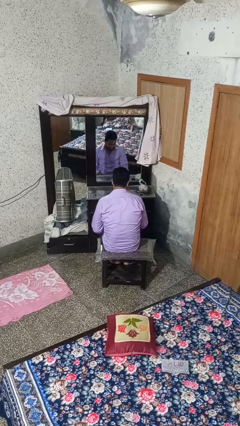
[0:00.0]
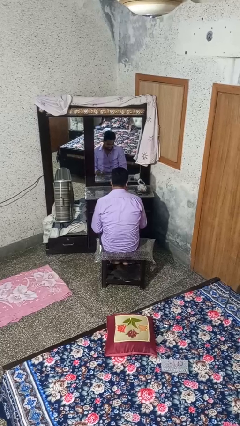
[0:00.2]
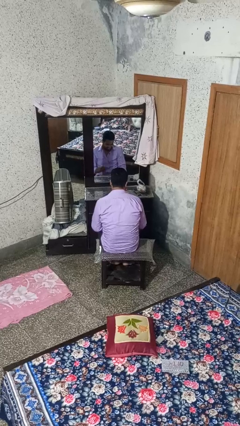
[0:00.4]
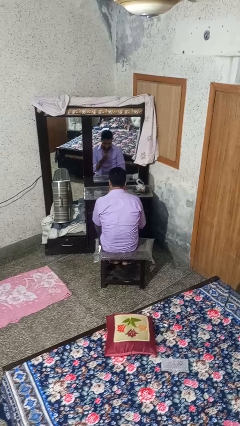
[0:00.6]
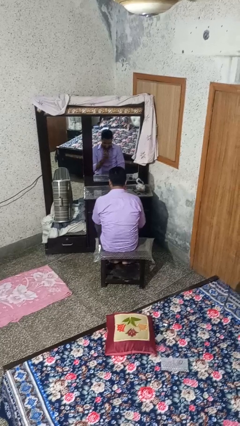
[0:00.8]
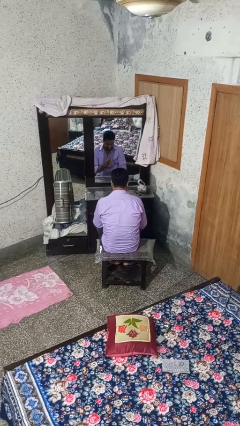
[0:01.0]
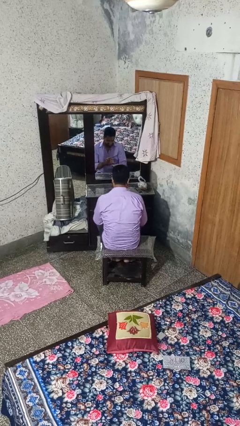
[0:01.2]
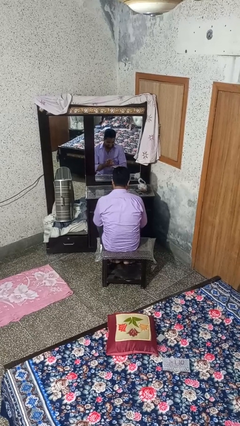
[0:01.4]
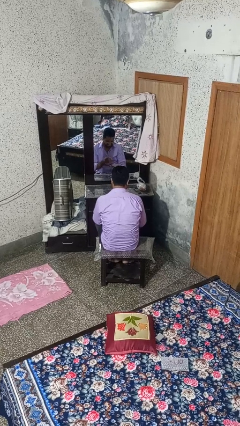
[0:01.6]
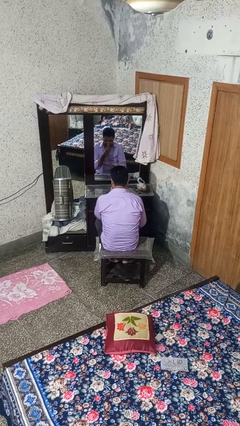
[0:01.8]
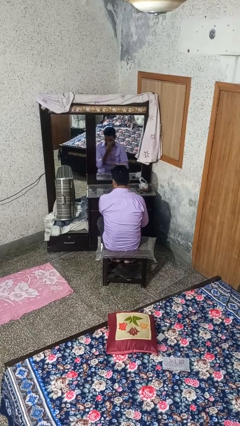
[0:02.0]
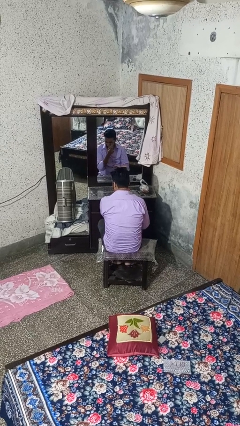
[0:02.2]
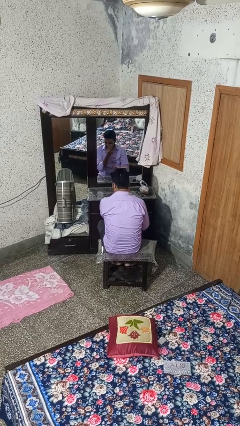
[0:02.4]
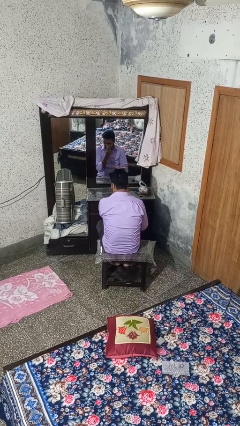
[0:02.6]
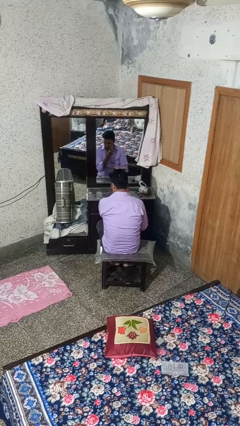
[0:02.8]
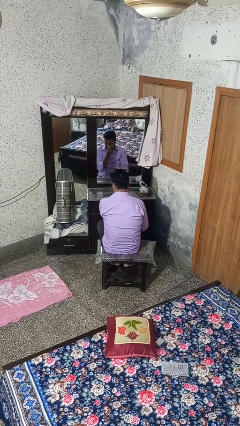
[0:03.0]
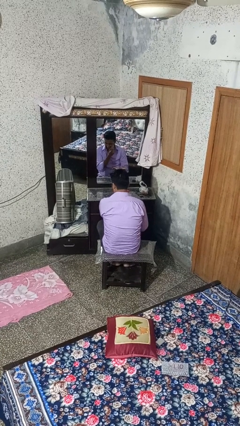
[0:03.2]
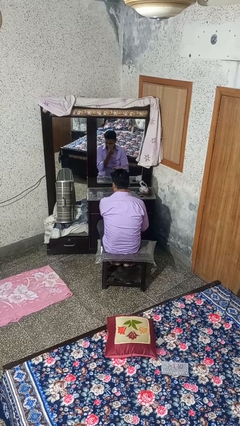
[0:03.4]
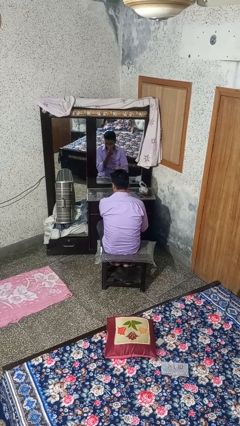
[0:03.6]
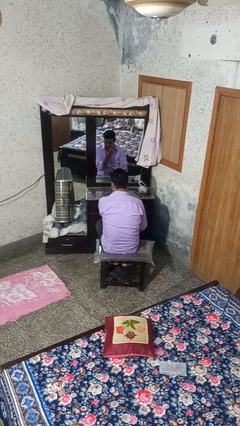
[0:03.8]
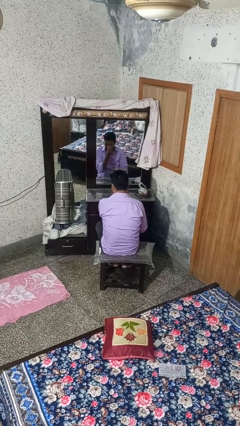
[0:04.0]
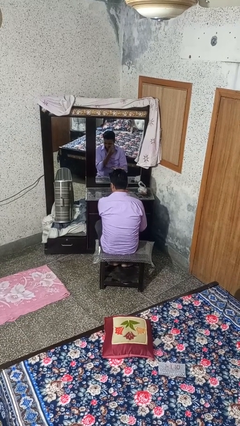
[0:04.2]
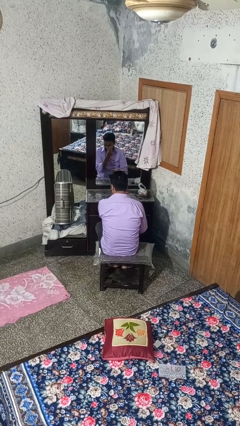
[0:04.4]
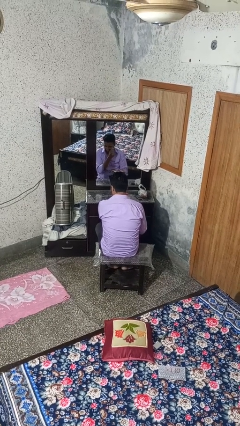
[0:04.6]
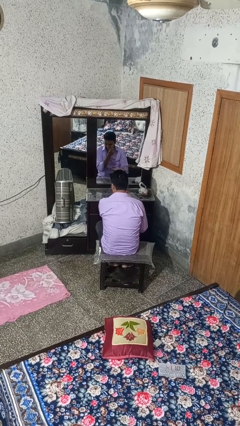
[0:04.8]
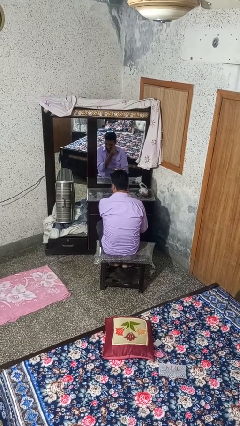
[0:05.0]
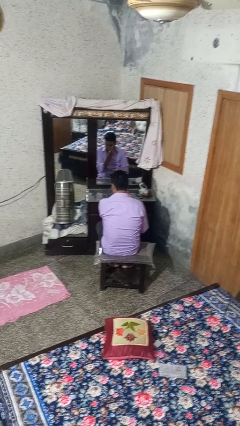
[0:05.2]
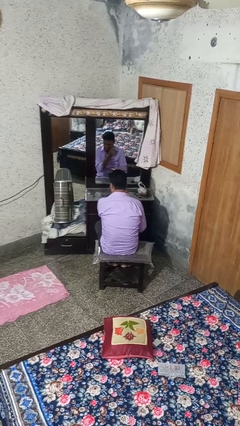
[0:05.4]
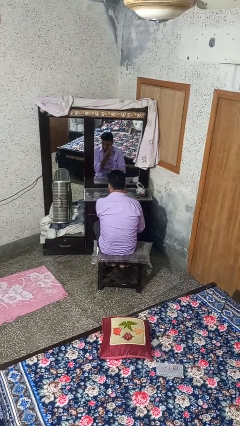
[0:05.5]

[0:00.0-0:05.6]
person applies eye makeup

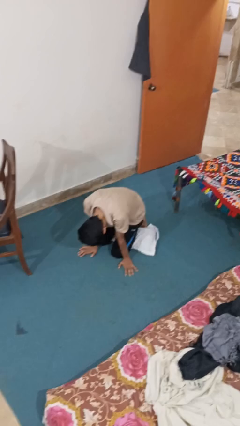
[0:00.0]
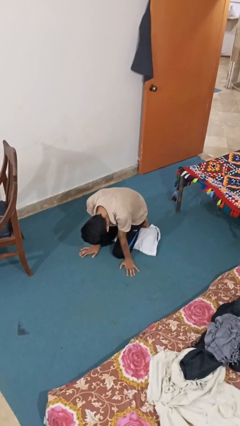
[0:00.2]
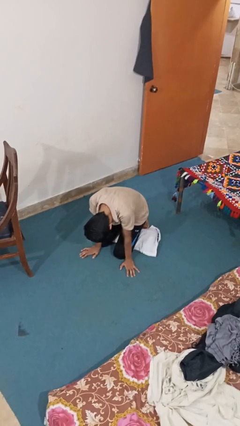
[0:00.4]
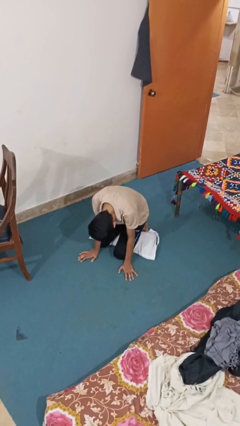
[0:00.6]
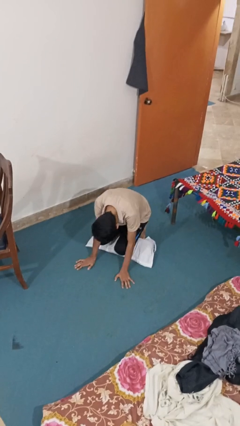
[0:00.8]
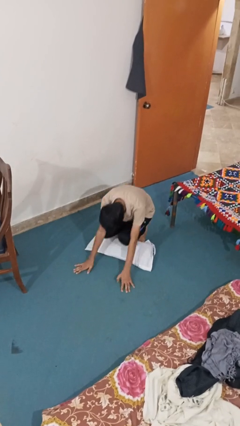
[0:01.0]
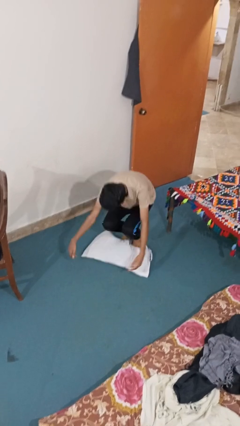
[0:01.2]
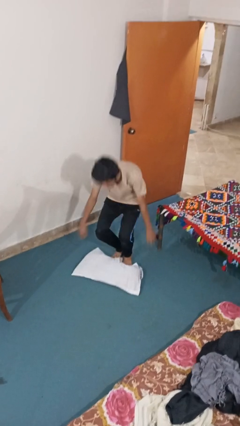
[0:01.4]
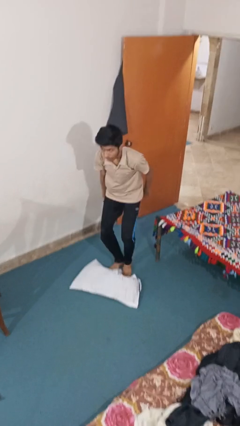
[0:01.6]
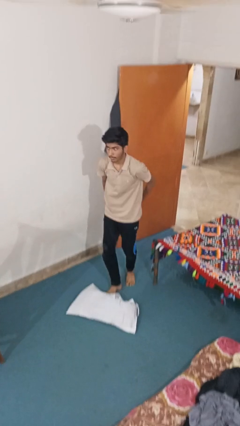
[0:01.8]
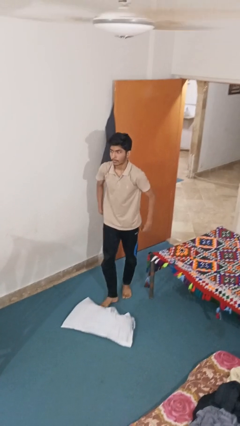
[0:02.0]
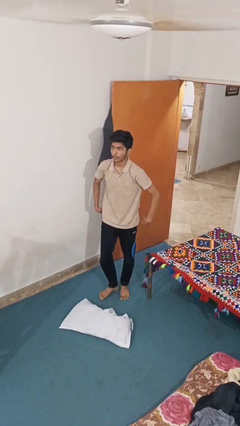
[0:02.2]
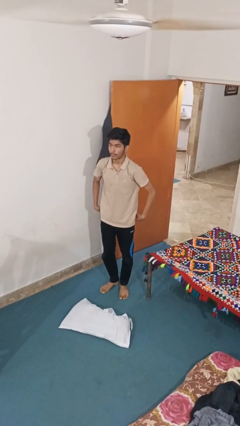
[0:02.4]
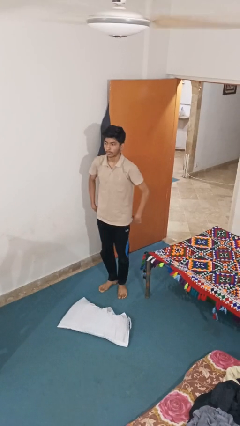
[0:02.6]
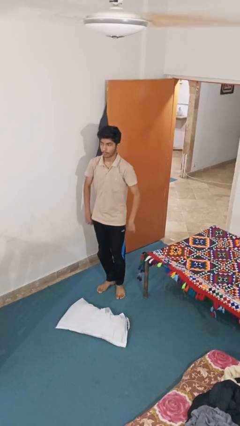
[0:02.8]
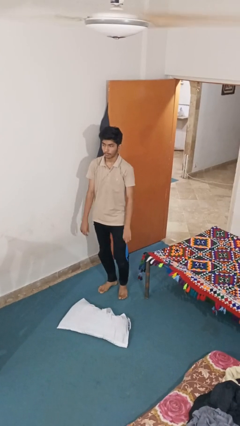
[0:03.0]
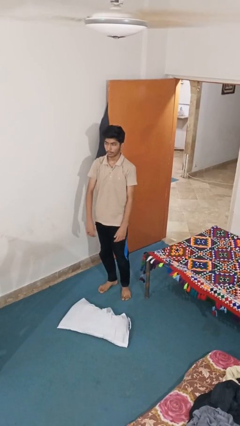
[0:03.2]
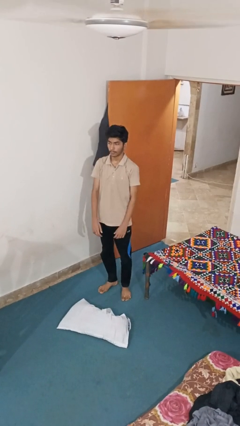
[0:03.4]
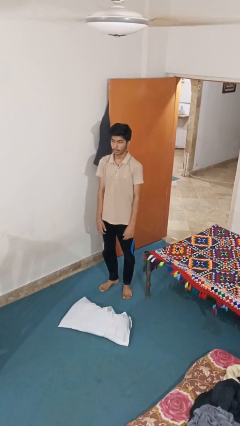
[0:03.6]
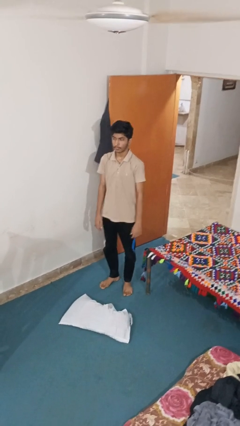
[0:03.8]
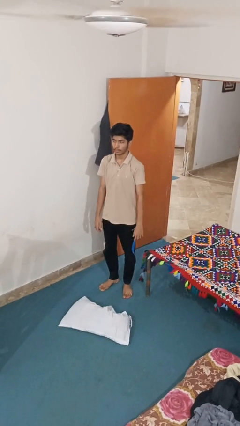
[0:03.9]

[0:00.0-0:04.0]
person stands up from floor

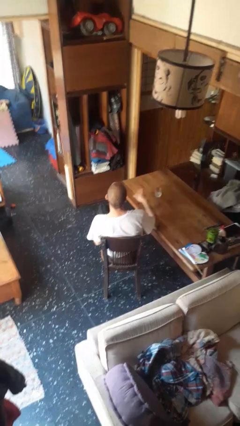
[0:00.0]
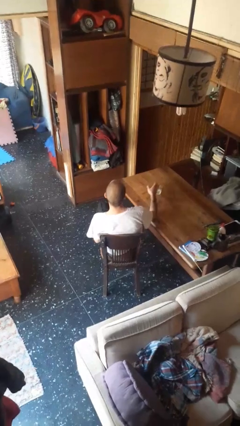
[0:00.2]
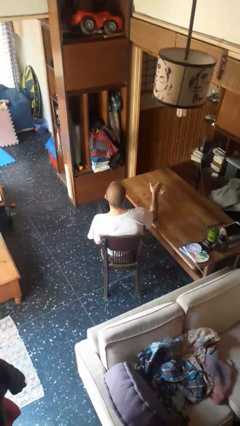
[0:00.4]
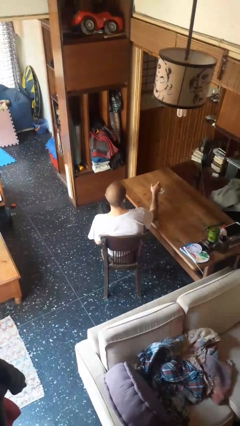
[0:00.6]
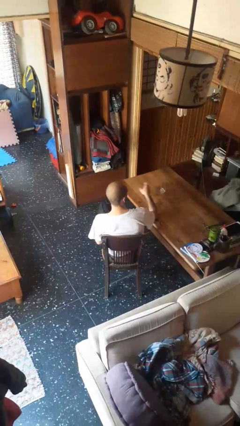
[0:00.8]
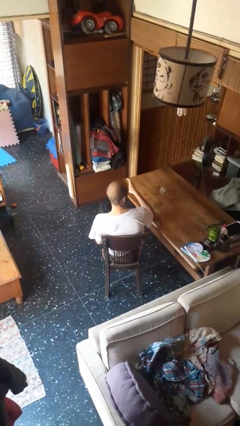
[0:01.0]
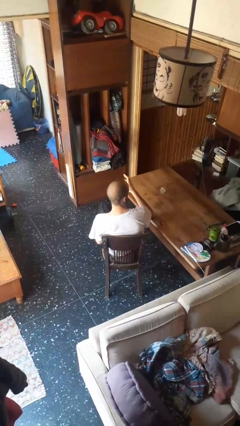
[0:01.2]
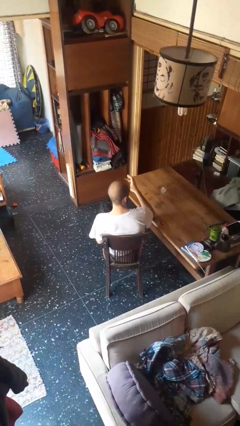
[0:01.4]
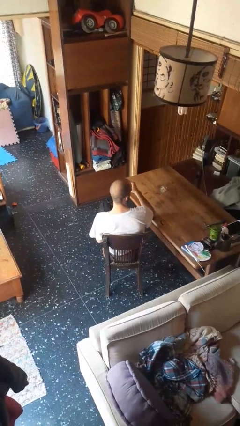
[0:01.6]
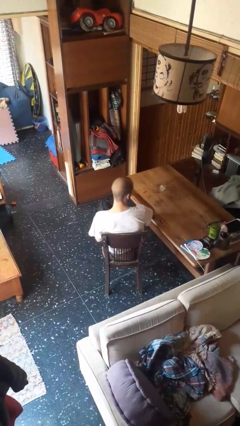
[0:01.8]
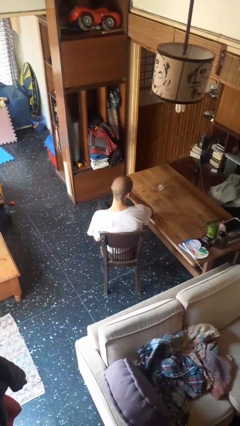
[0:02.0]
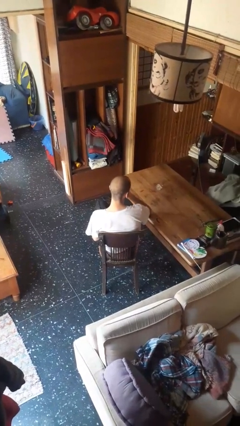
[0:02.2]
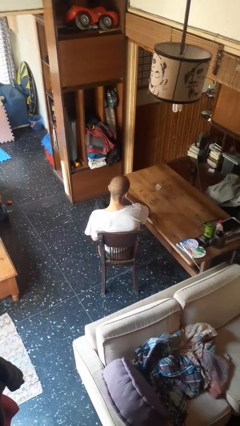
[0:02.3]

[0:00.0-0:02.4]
person knocks over glass

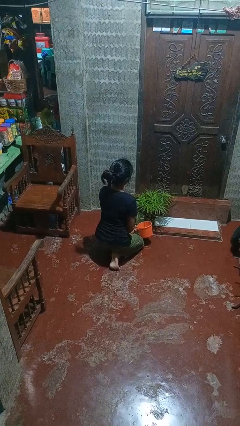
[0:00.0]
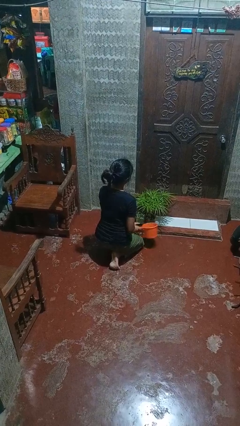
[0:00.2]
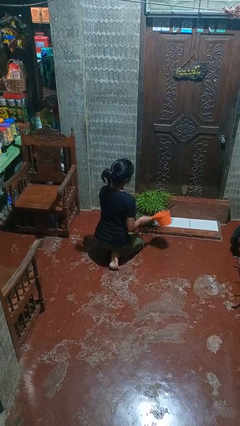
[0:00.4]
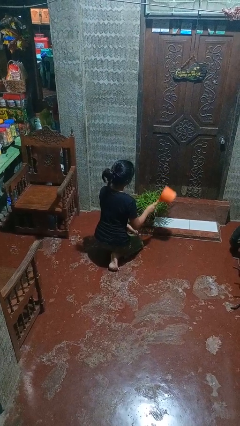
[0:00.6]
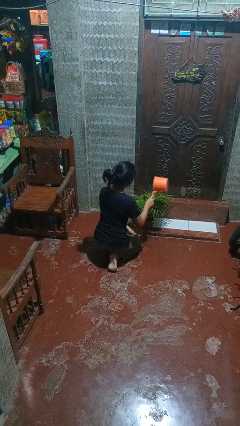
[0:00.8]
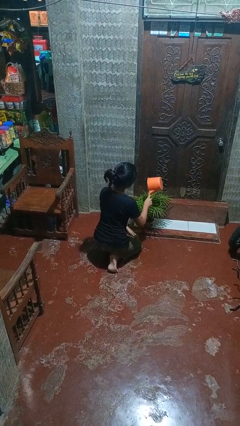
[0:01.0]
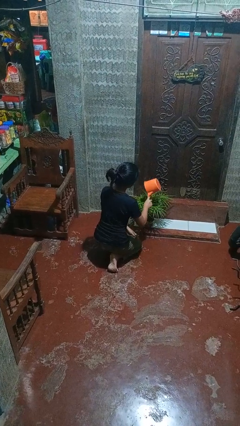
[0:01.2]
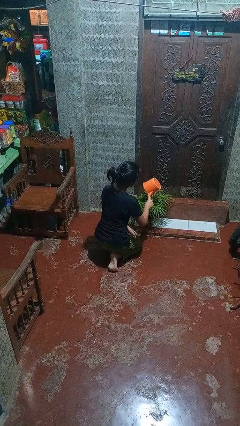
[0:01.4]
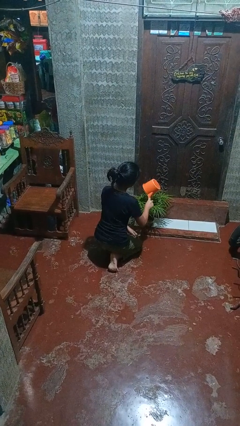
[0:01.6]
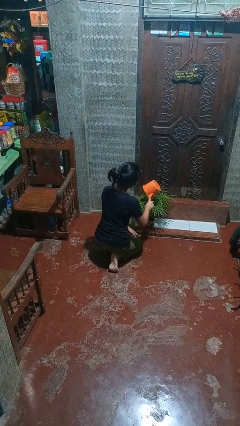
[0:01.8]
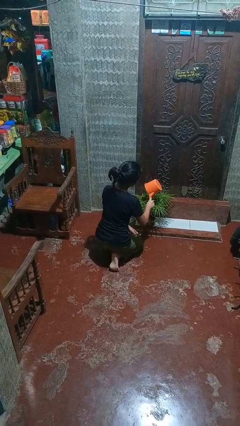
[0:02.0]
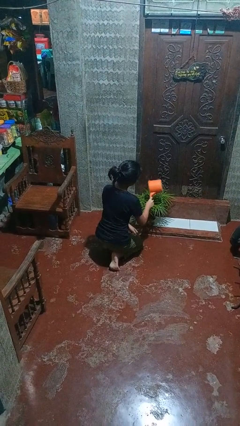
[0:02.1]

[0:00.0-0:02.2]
person waters houseplant

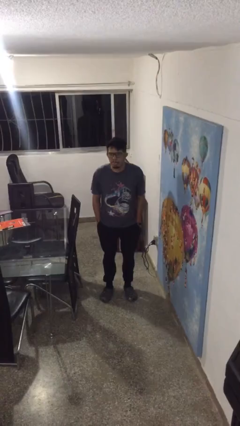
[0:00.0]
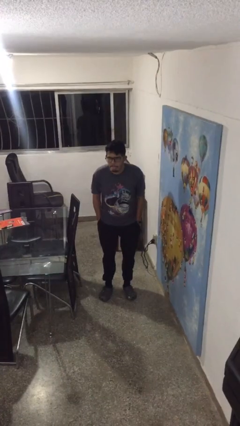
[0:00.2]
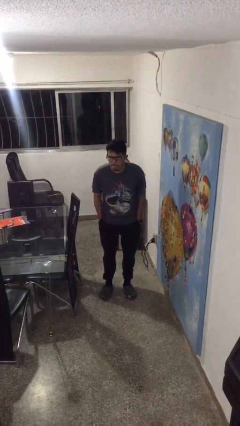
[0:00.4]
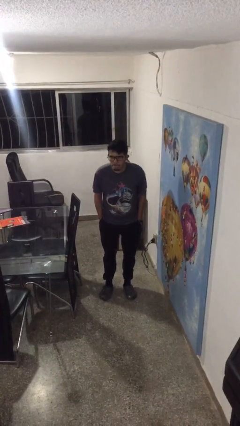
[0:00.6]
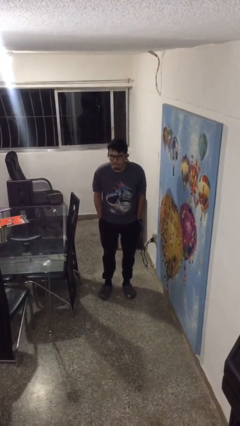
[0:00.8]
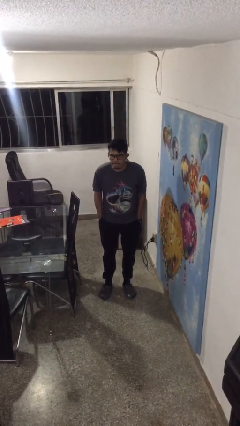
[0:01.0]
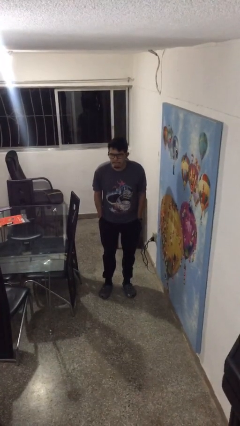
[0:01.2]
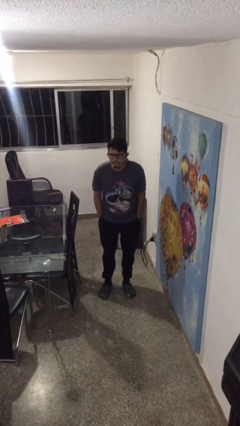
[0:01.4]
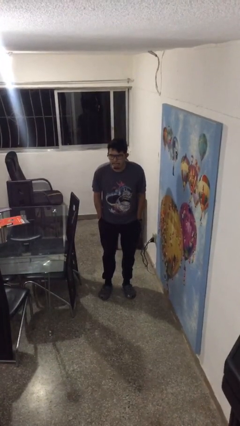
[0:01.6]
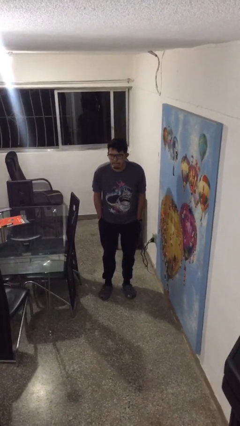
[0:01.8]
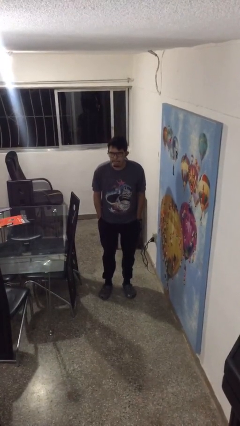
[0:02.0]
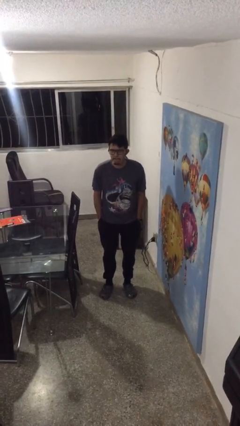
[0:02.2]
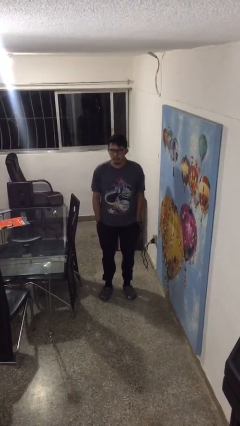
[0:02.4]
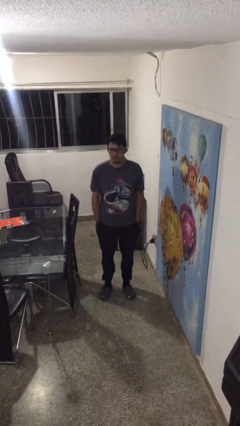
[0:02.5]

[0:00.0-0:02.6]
person sticks out tongue

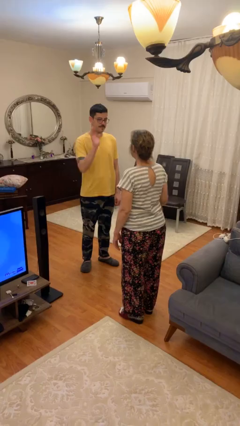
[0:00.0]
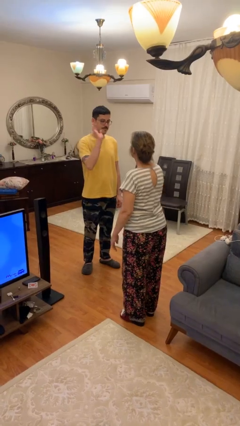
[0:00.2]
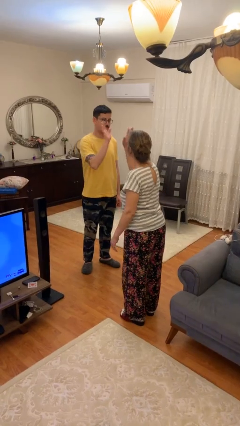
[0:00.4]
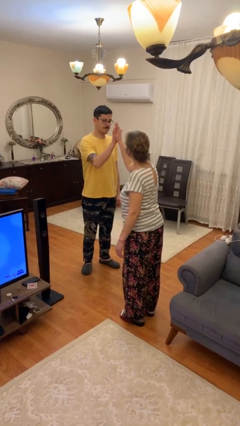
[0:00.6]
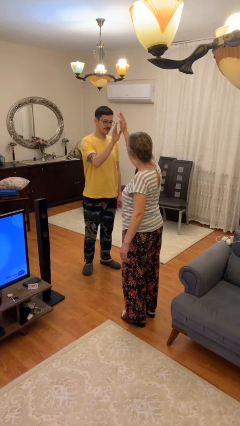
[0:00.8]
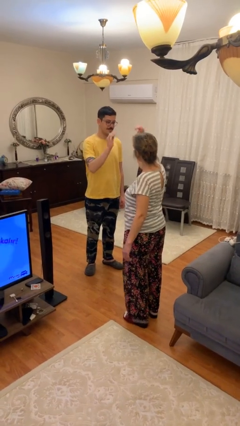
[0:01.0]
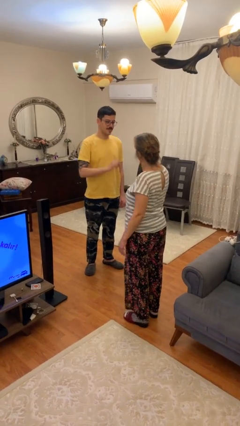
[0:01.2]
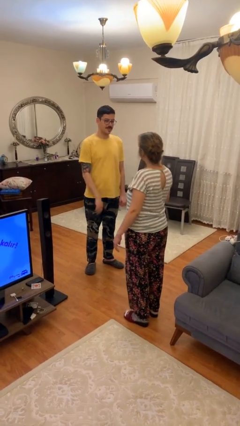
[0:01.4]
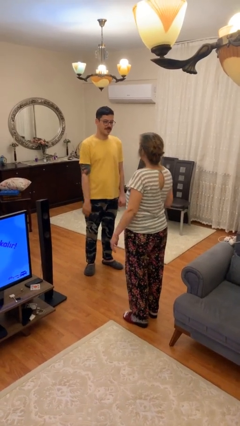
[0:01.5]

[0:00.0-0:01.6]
person highfives hand
